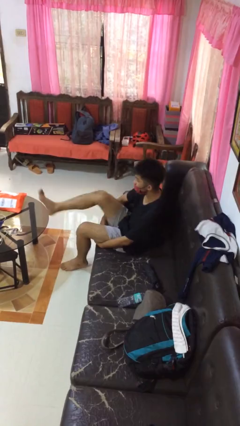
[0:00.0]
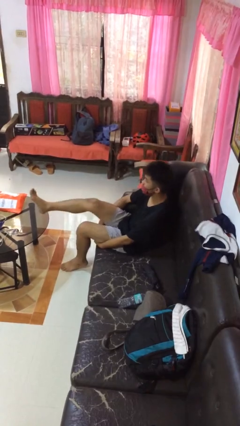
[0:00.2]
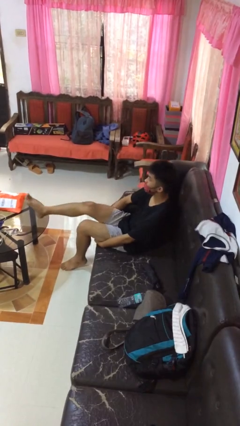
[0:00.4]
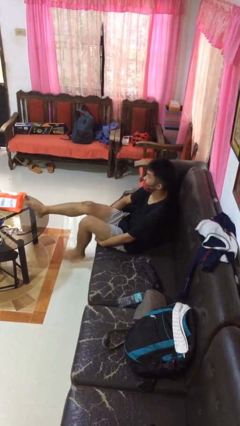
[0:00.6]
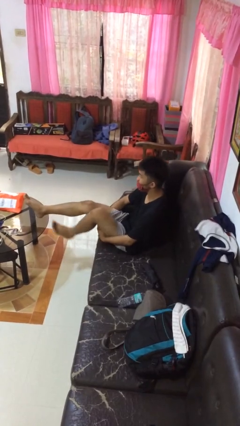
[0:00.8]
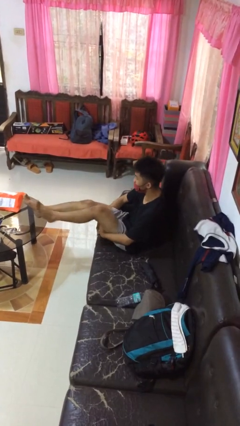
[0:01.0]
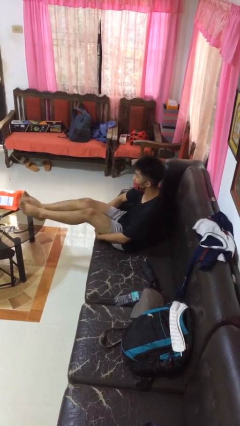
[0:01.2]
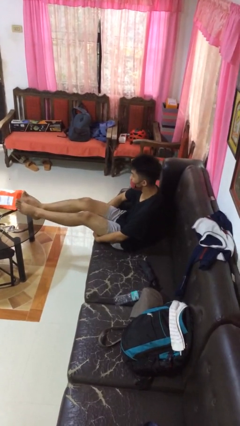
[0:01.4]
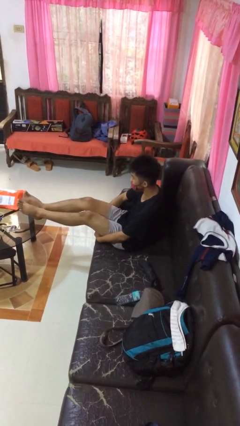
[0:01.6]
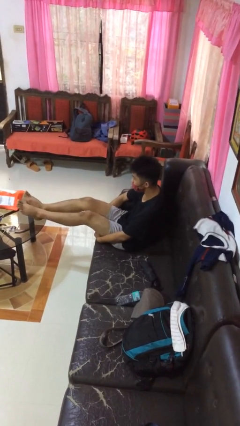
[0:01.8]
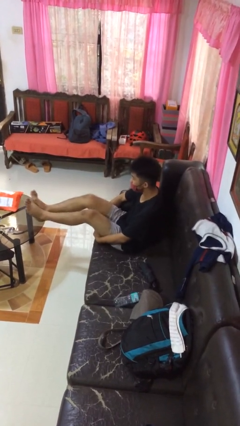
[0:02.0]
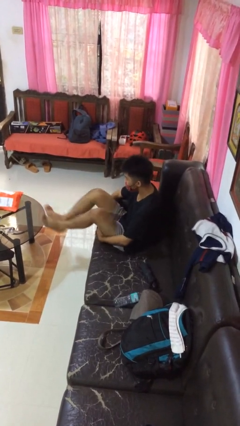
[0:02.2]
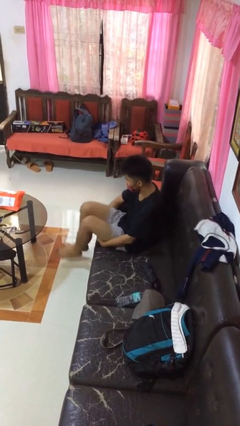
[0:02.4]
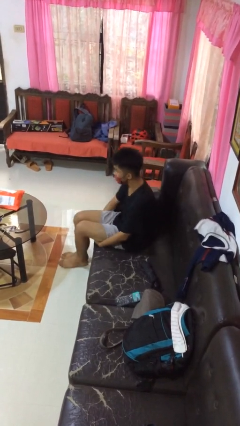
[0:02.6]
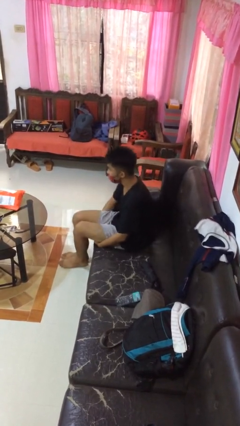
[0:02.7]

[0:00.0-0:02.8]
person puts feet up

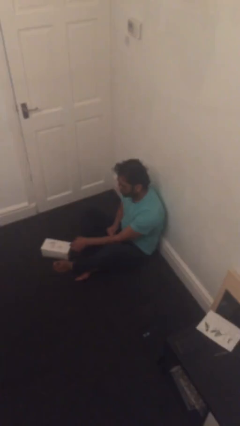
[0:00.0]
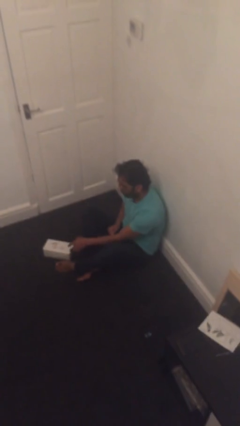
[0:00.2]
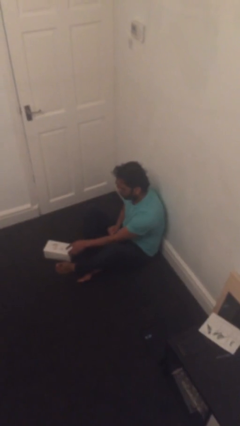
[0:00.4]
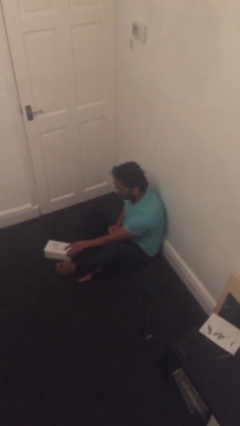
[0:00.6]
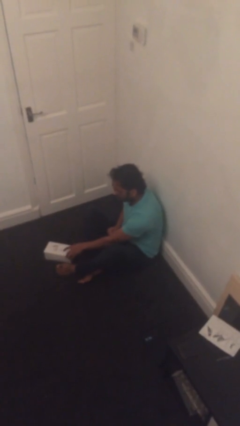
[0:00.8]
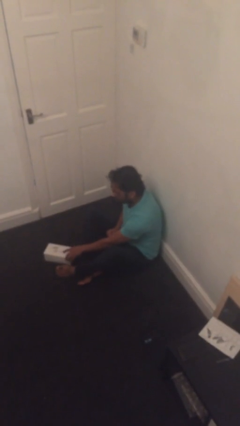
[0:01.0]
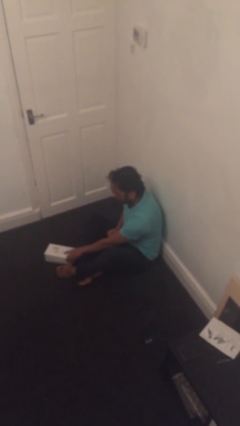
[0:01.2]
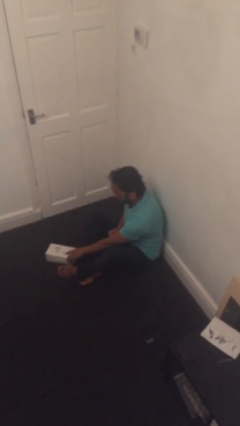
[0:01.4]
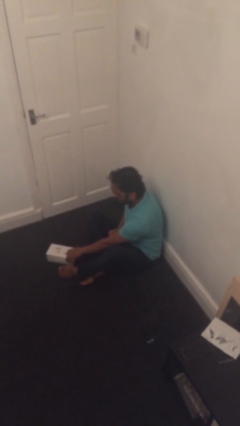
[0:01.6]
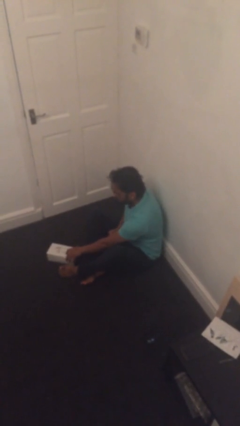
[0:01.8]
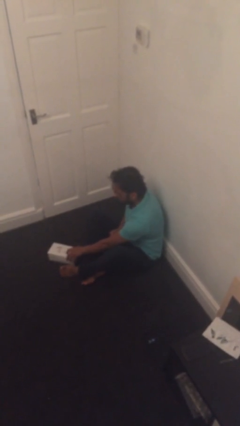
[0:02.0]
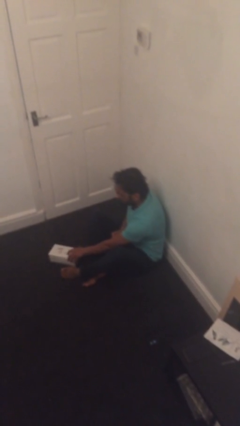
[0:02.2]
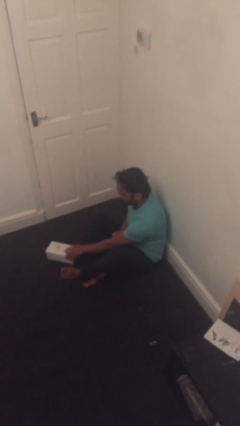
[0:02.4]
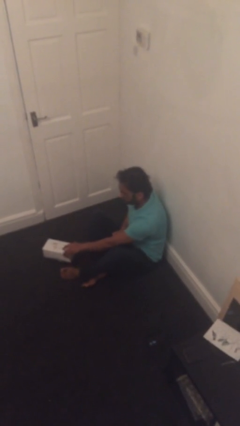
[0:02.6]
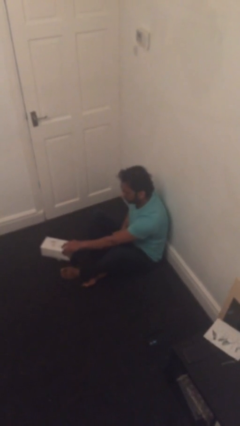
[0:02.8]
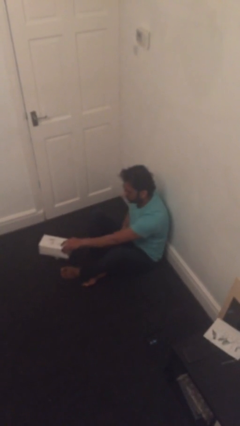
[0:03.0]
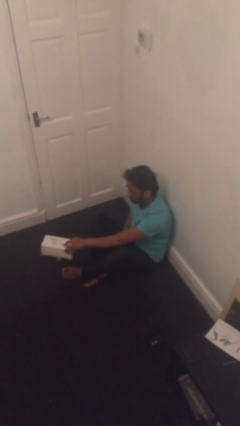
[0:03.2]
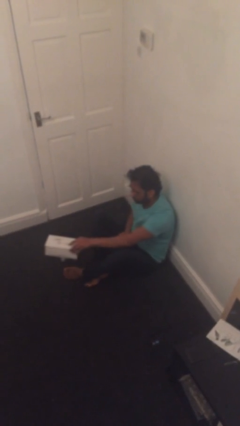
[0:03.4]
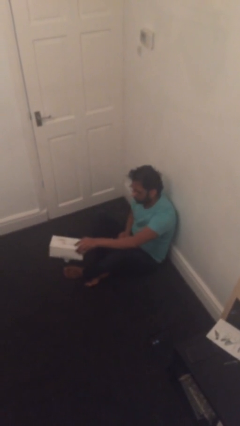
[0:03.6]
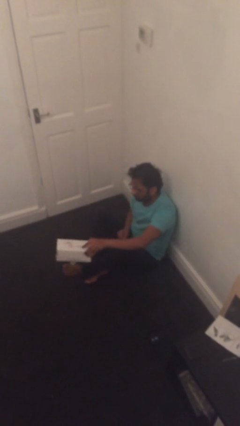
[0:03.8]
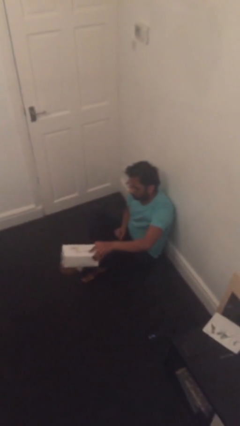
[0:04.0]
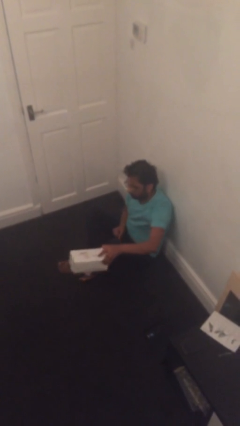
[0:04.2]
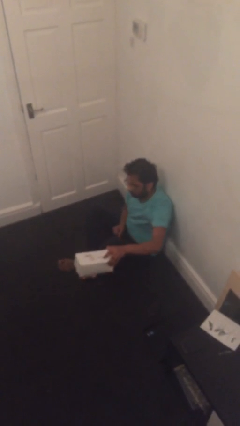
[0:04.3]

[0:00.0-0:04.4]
person picks up object from floor

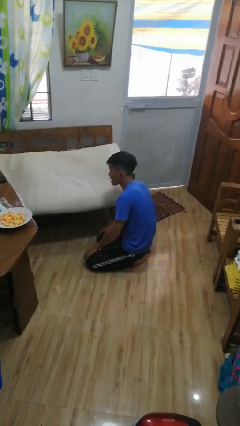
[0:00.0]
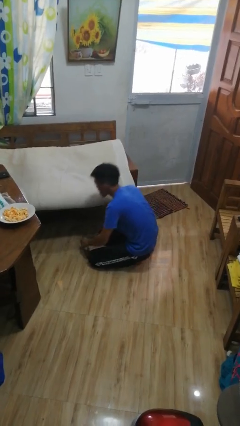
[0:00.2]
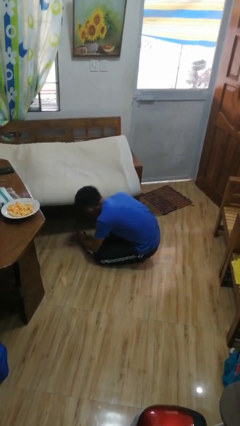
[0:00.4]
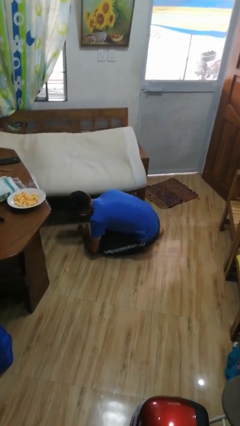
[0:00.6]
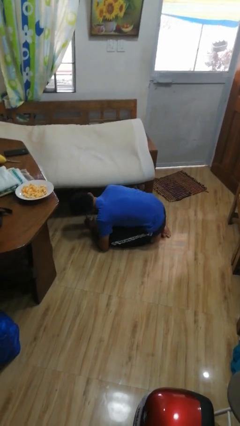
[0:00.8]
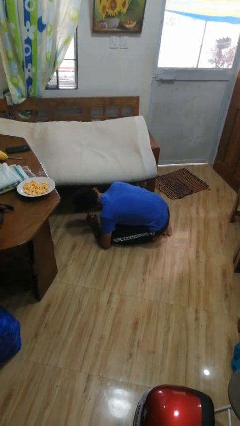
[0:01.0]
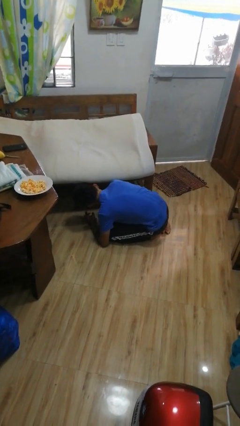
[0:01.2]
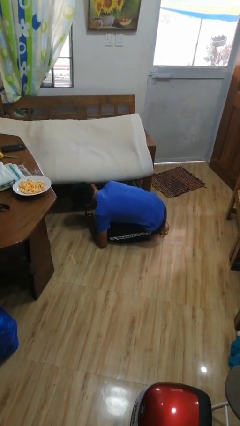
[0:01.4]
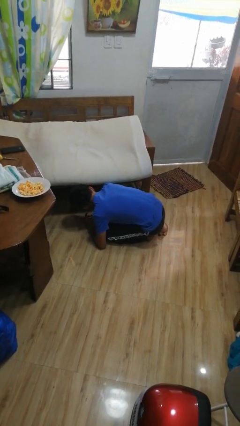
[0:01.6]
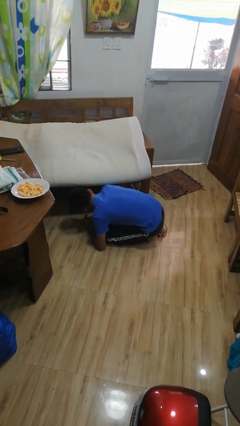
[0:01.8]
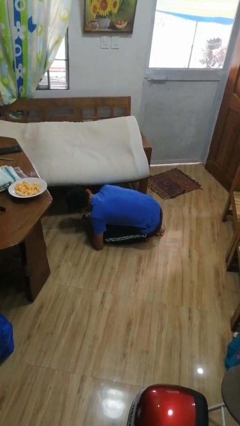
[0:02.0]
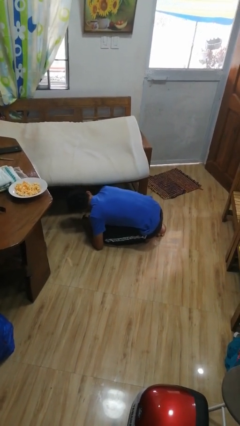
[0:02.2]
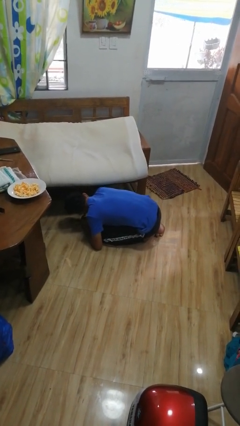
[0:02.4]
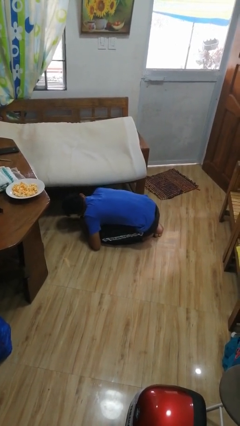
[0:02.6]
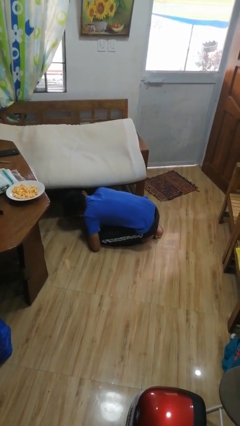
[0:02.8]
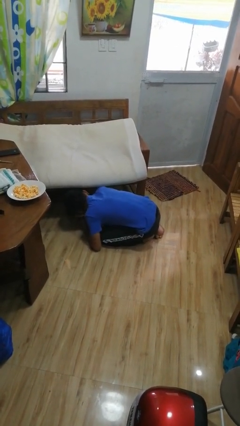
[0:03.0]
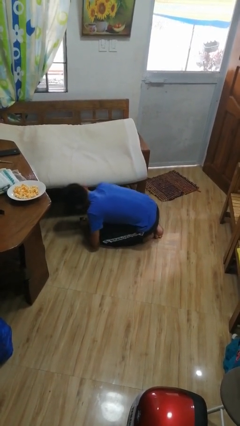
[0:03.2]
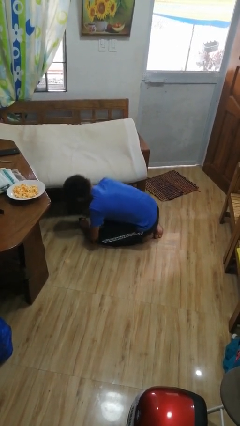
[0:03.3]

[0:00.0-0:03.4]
person searches under couch

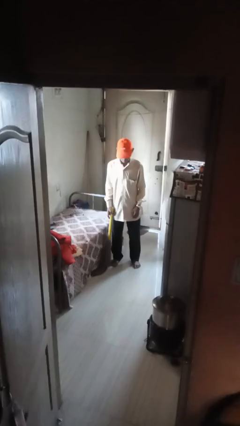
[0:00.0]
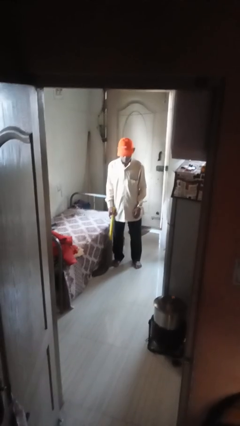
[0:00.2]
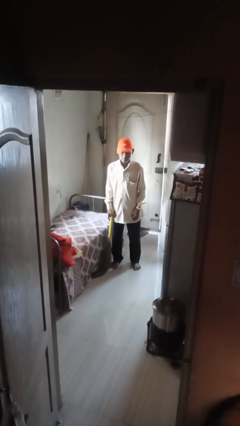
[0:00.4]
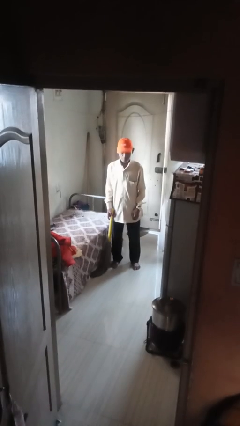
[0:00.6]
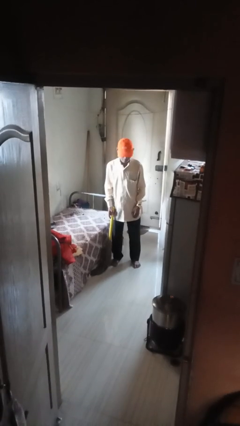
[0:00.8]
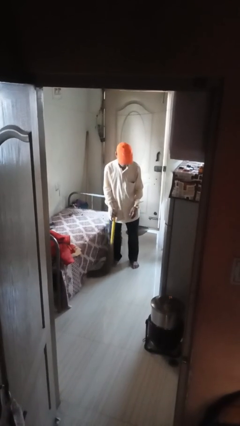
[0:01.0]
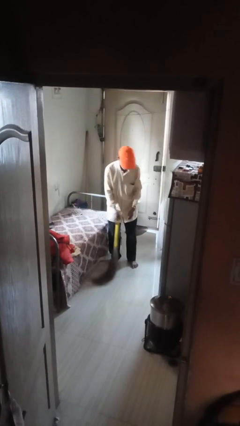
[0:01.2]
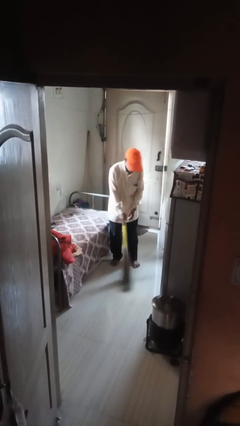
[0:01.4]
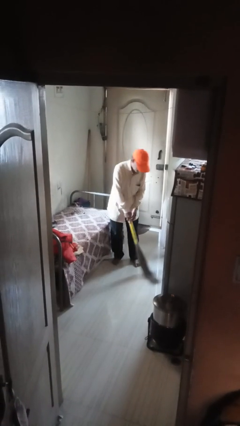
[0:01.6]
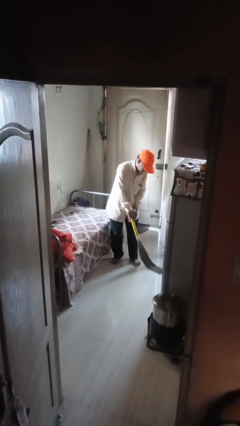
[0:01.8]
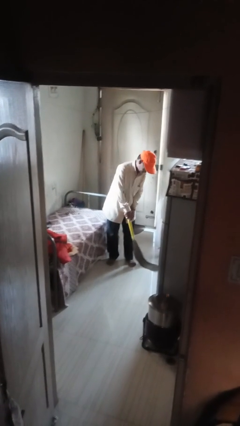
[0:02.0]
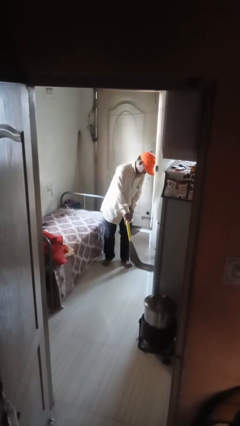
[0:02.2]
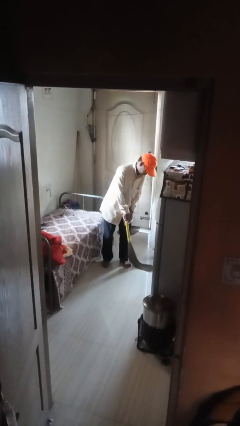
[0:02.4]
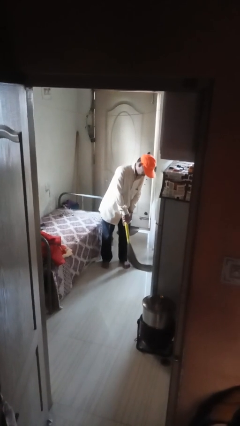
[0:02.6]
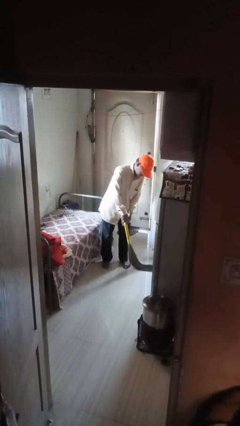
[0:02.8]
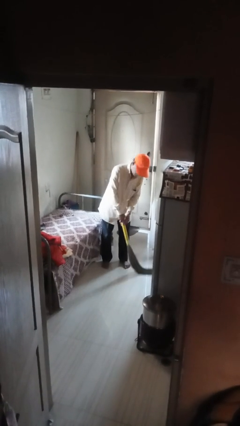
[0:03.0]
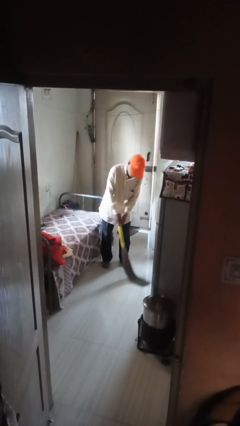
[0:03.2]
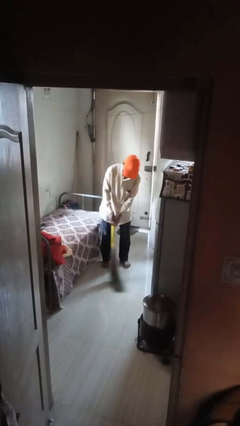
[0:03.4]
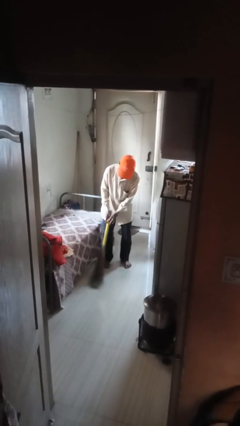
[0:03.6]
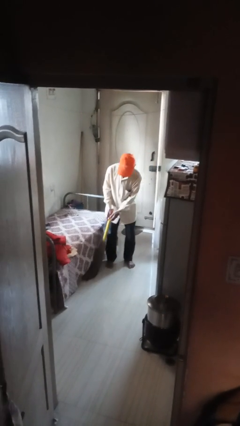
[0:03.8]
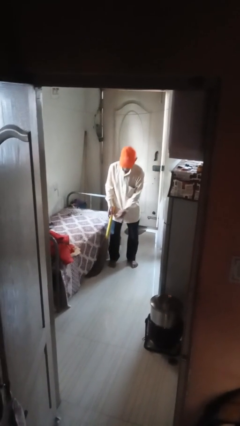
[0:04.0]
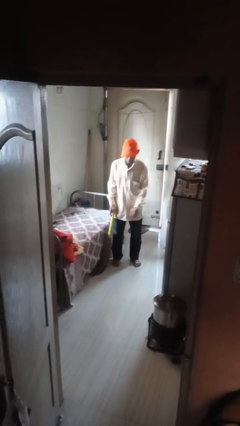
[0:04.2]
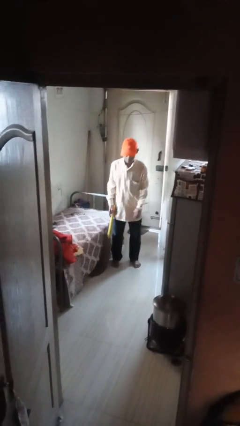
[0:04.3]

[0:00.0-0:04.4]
person sweeps floor

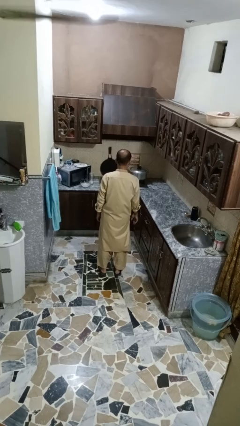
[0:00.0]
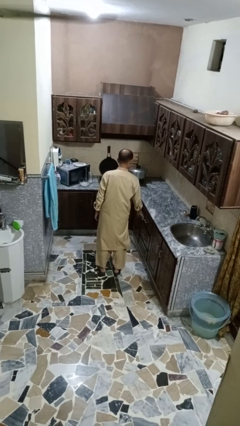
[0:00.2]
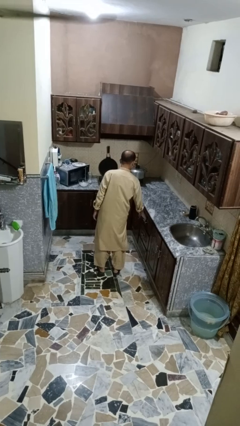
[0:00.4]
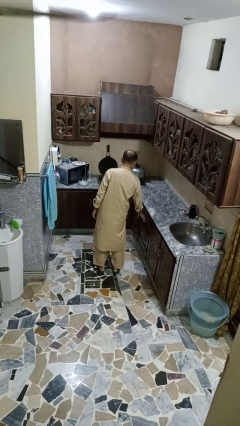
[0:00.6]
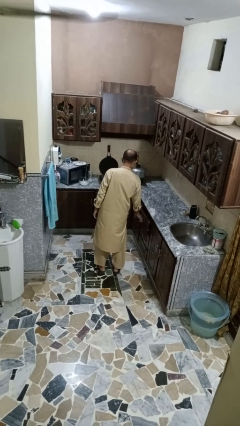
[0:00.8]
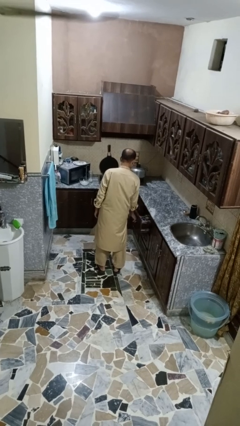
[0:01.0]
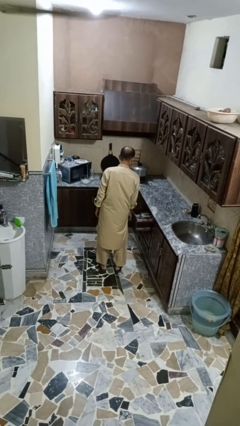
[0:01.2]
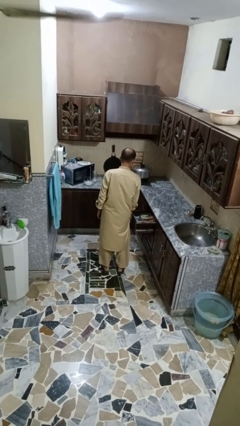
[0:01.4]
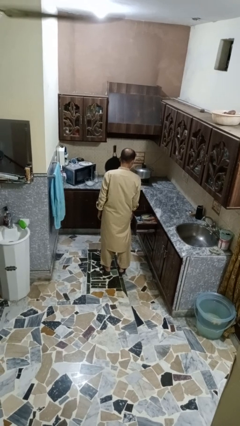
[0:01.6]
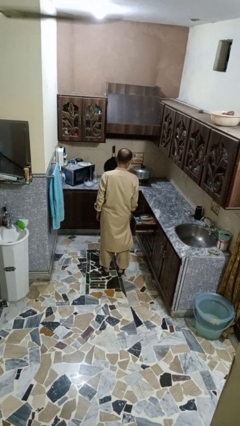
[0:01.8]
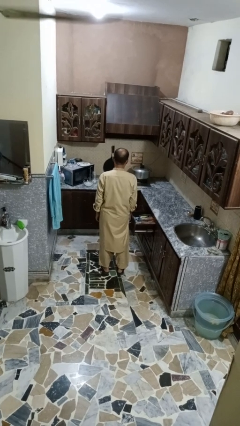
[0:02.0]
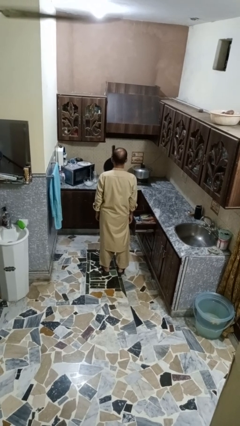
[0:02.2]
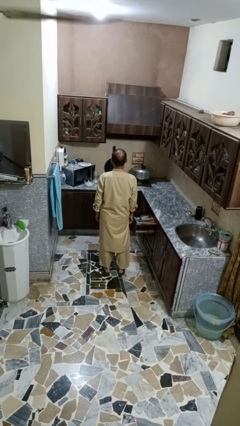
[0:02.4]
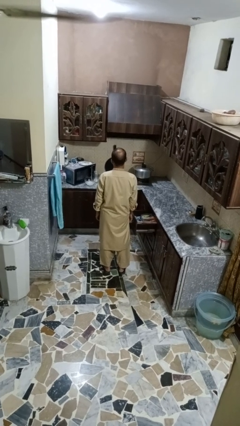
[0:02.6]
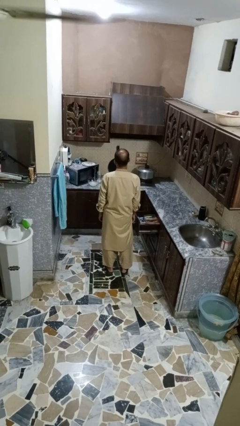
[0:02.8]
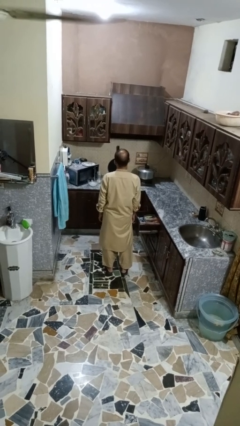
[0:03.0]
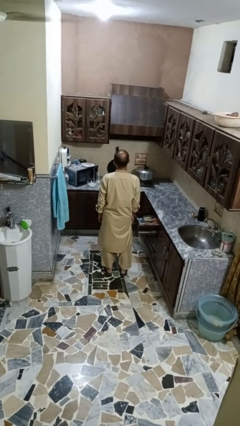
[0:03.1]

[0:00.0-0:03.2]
person opens kitchen drawer
